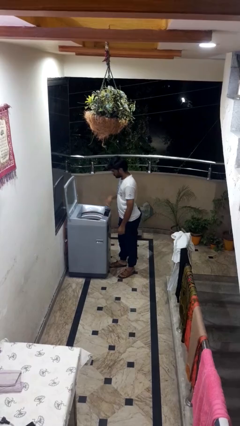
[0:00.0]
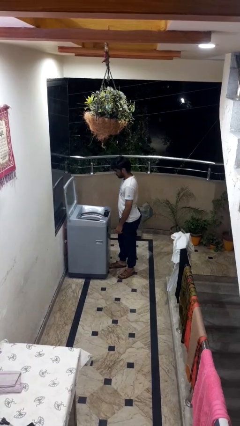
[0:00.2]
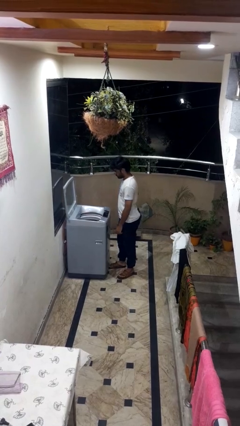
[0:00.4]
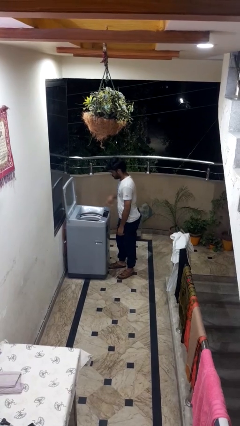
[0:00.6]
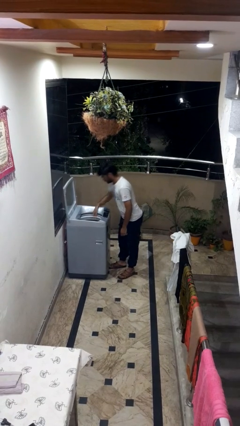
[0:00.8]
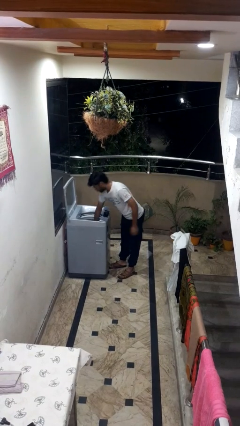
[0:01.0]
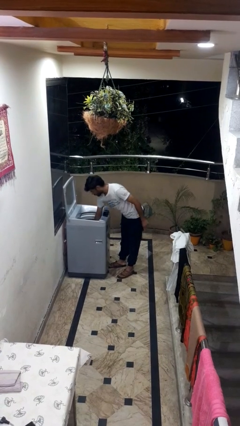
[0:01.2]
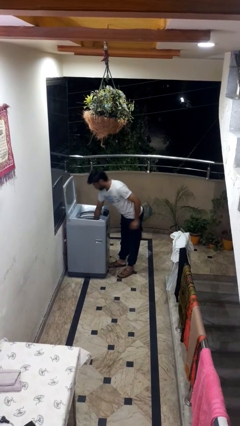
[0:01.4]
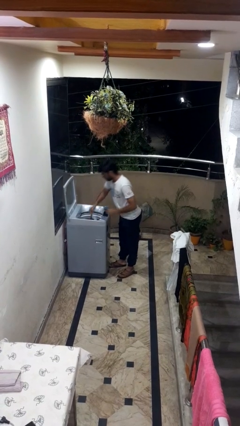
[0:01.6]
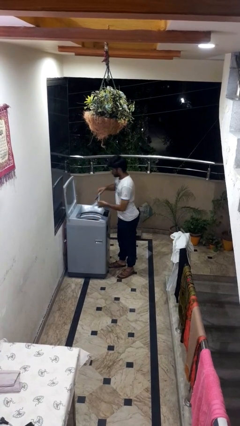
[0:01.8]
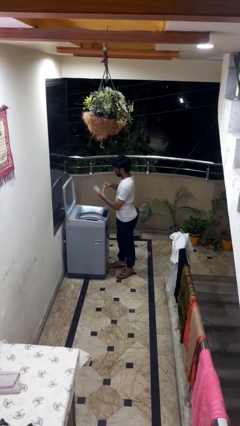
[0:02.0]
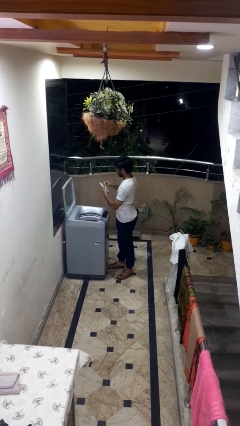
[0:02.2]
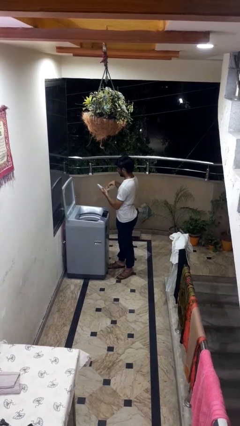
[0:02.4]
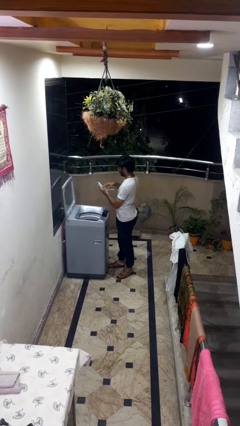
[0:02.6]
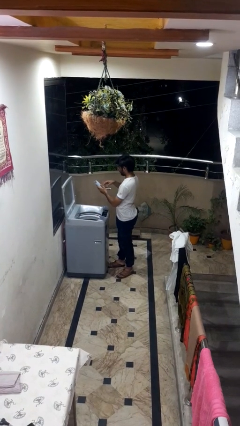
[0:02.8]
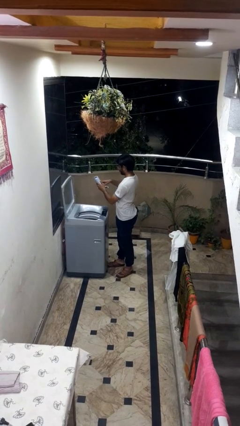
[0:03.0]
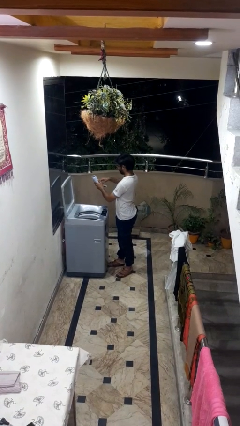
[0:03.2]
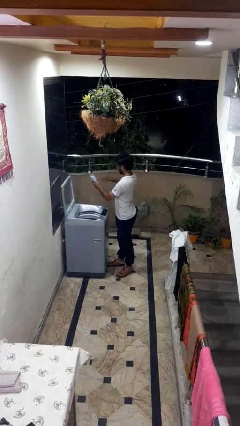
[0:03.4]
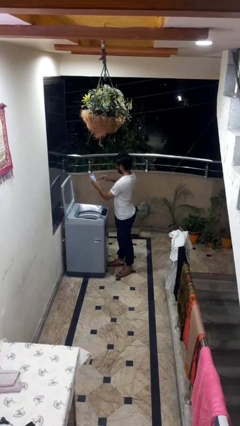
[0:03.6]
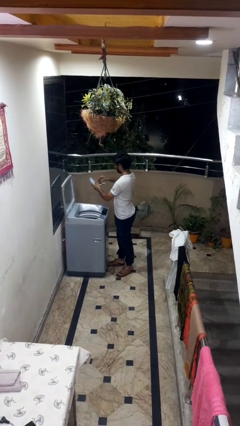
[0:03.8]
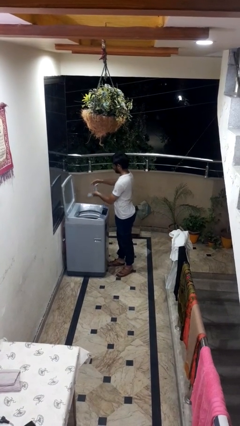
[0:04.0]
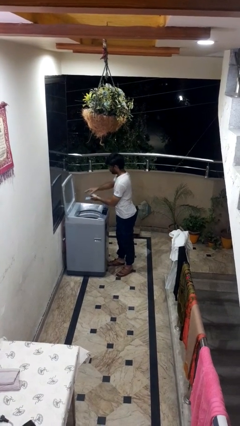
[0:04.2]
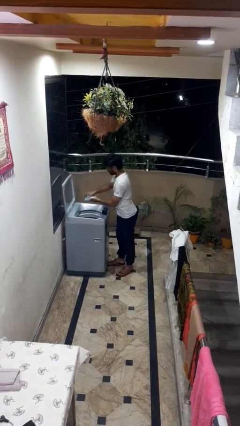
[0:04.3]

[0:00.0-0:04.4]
person cleans dryer lint trap

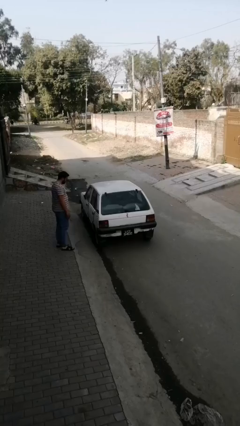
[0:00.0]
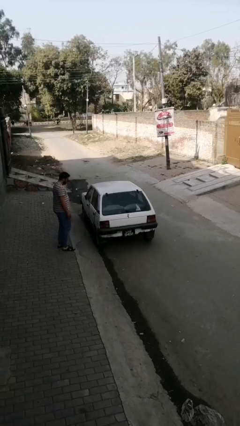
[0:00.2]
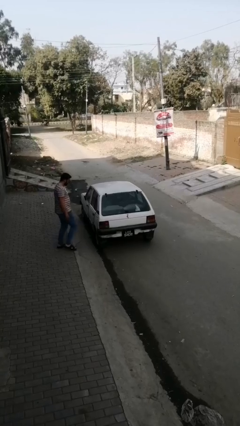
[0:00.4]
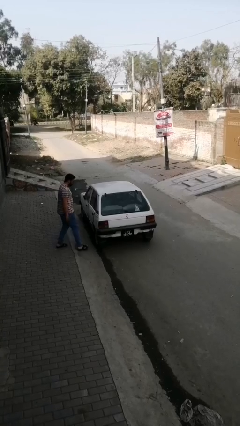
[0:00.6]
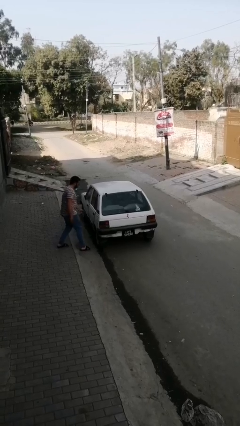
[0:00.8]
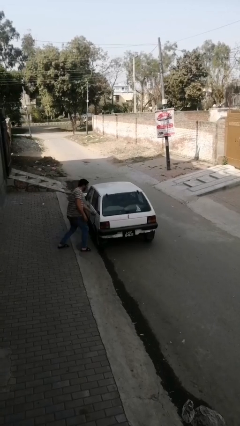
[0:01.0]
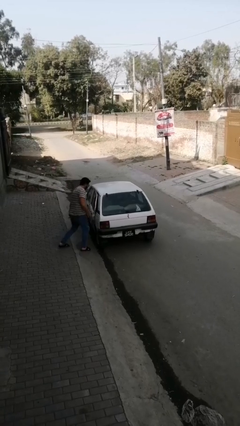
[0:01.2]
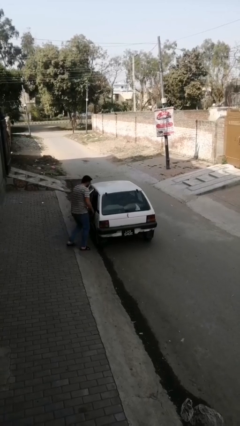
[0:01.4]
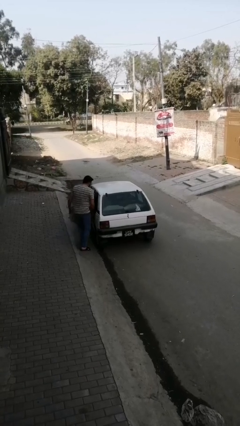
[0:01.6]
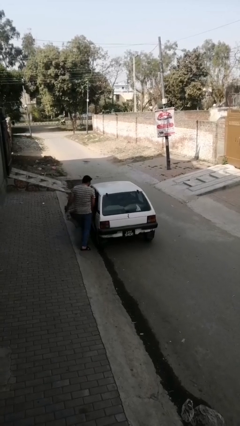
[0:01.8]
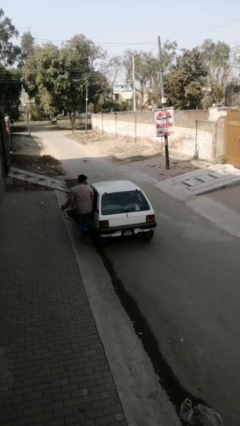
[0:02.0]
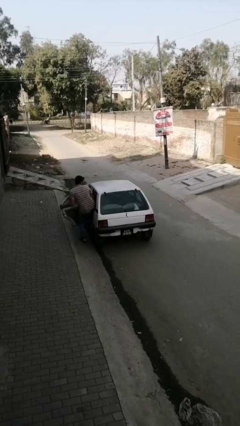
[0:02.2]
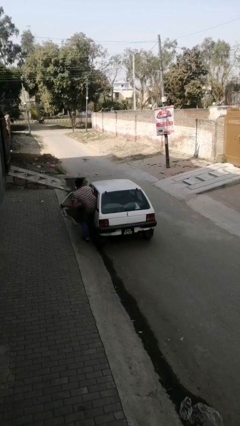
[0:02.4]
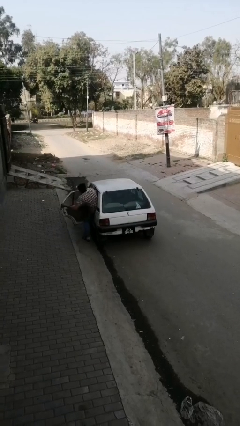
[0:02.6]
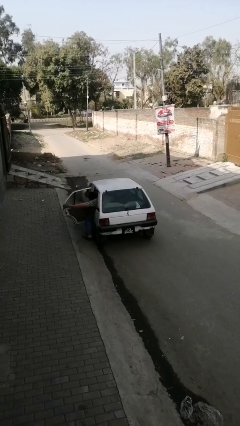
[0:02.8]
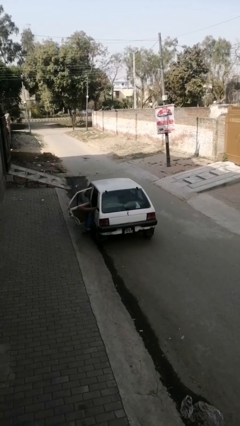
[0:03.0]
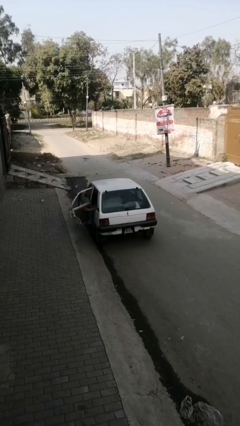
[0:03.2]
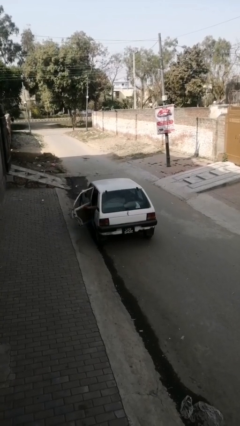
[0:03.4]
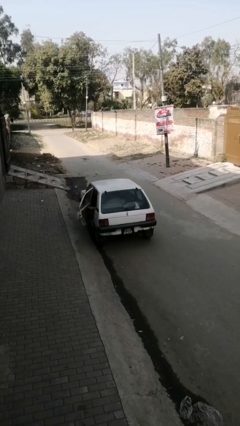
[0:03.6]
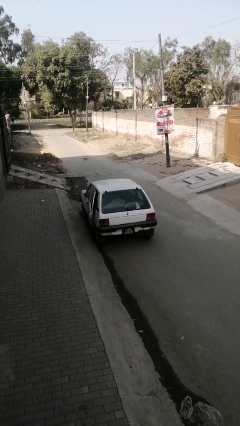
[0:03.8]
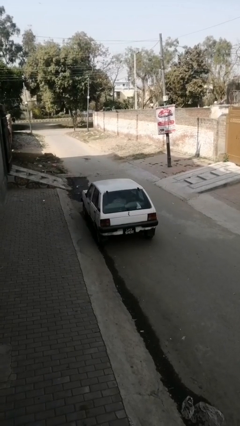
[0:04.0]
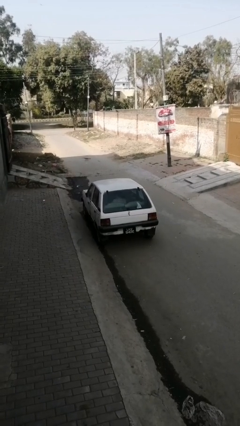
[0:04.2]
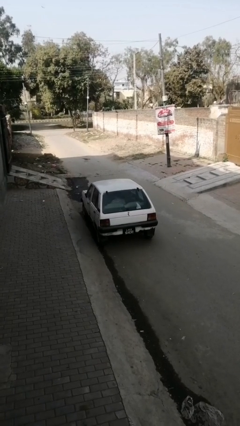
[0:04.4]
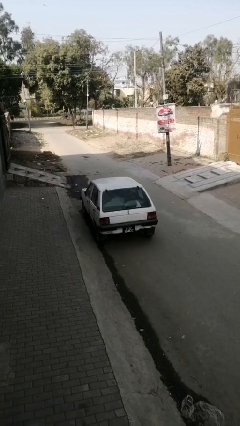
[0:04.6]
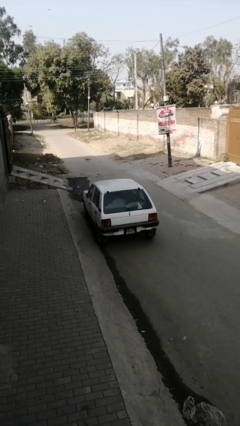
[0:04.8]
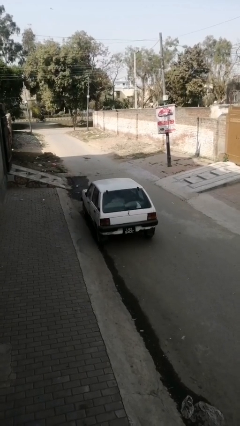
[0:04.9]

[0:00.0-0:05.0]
car picks up person

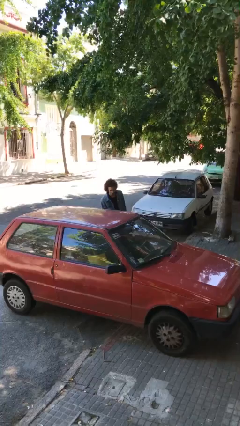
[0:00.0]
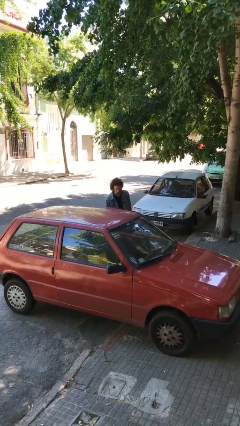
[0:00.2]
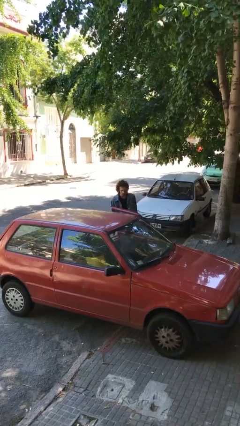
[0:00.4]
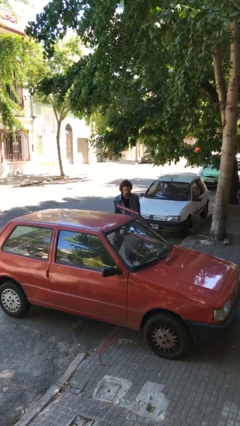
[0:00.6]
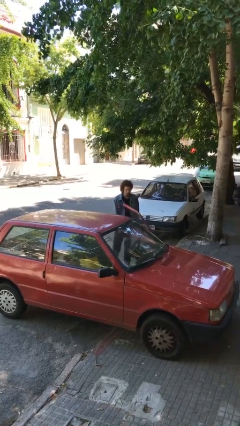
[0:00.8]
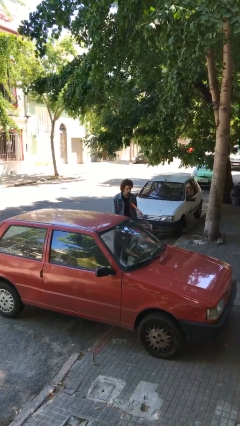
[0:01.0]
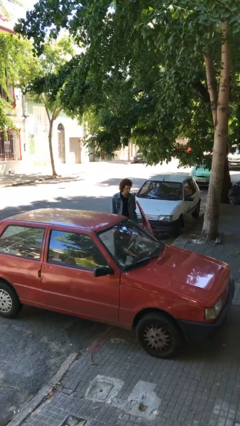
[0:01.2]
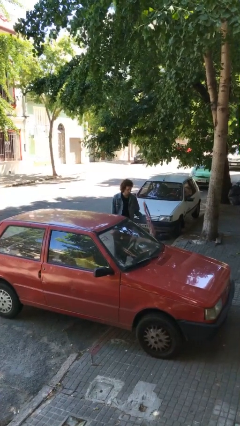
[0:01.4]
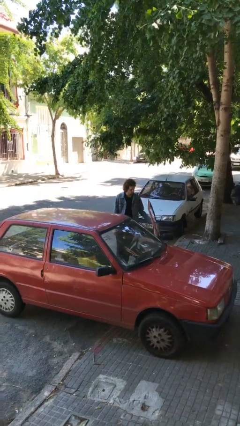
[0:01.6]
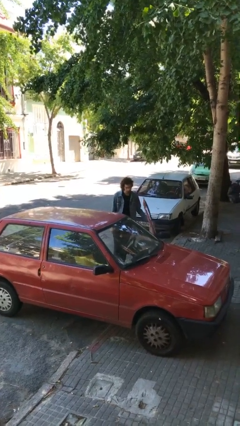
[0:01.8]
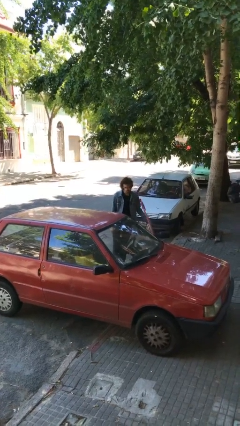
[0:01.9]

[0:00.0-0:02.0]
person opens car door

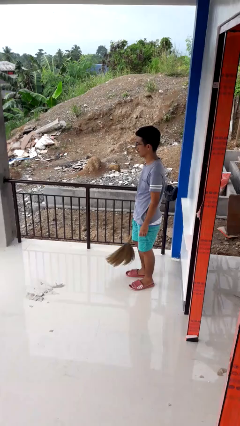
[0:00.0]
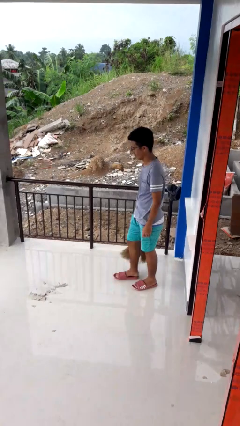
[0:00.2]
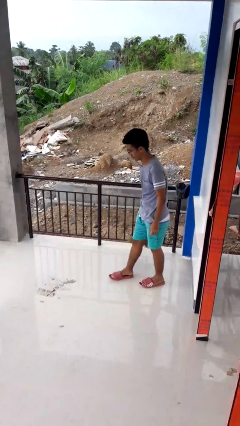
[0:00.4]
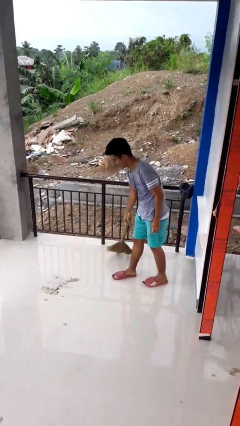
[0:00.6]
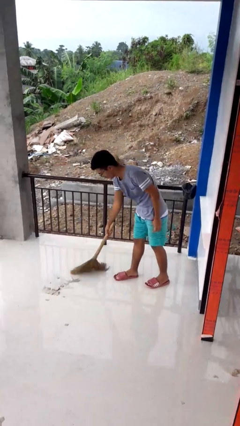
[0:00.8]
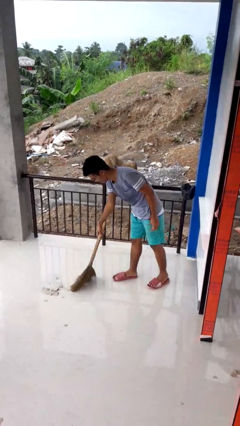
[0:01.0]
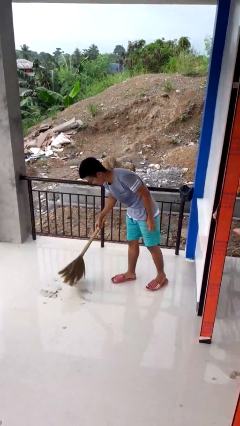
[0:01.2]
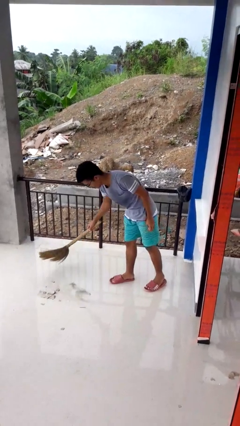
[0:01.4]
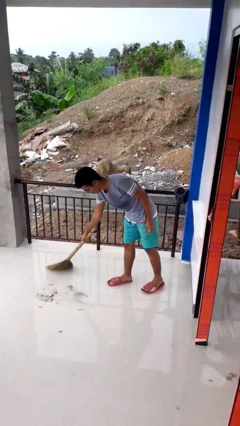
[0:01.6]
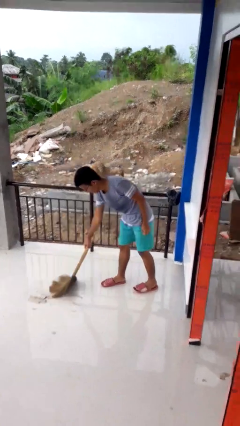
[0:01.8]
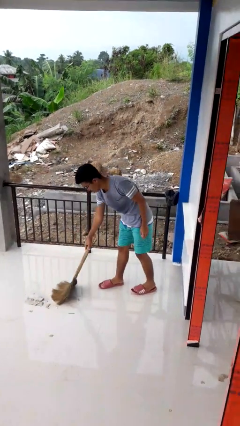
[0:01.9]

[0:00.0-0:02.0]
person sweeps floor

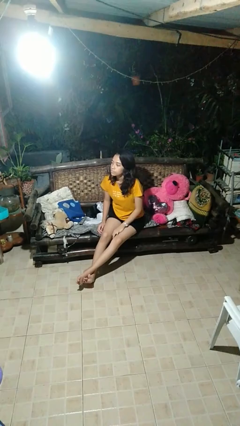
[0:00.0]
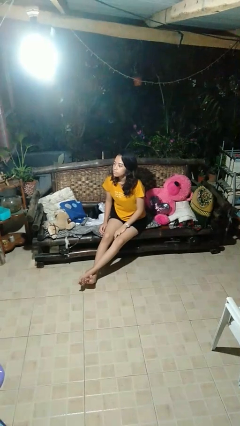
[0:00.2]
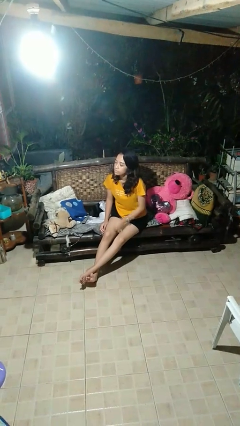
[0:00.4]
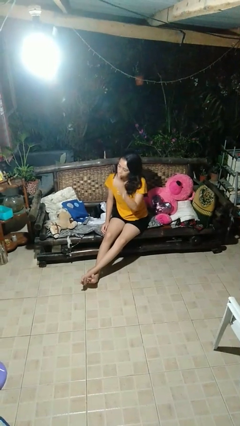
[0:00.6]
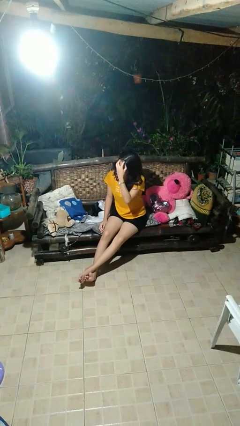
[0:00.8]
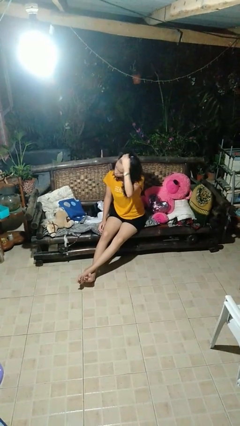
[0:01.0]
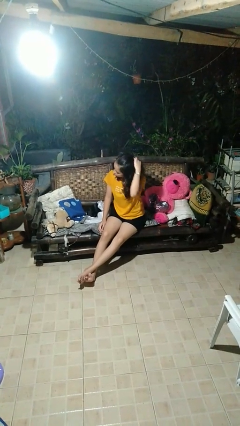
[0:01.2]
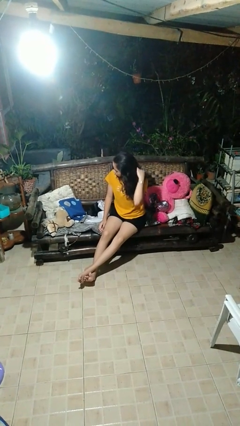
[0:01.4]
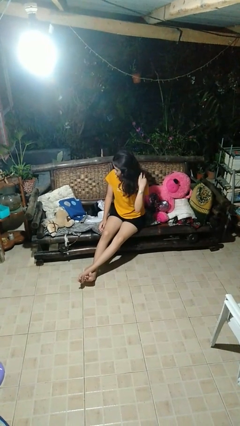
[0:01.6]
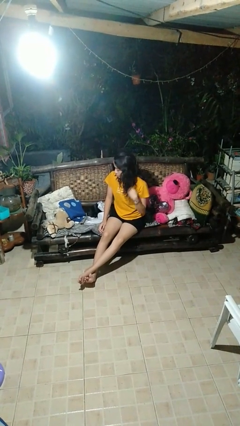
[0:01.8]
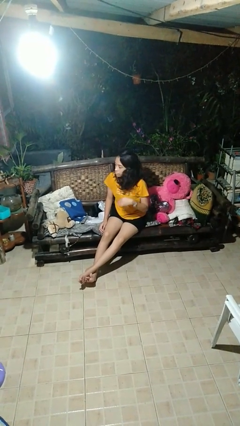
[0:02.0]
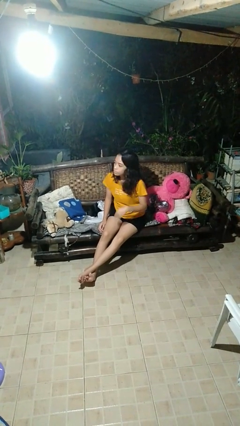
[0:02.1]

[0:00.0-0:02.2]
person strokes hair

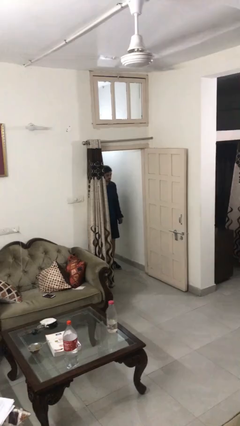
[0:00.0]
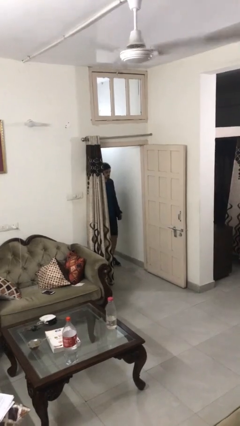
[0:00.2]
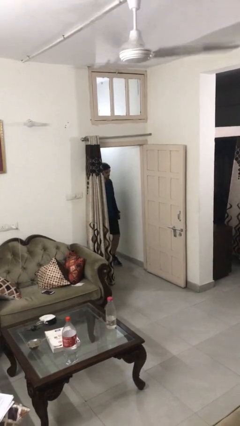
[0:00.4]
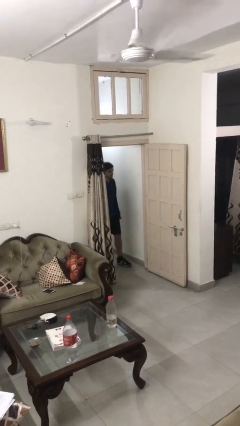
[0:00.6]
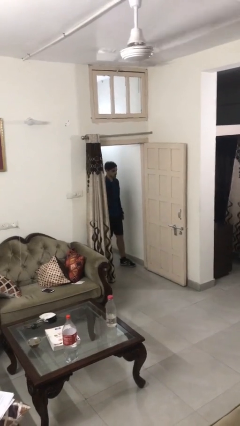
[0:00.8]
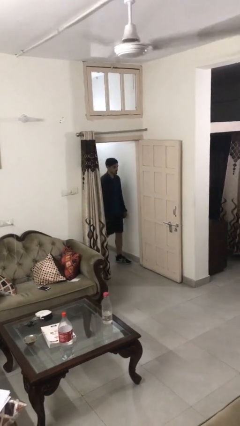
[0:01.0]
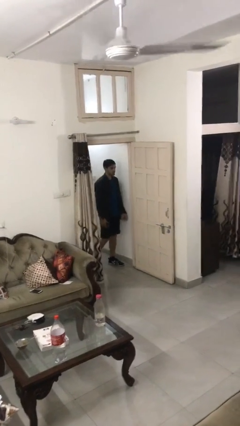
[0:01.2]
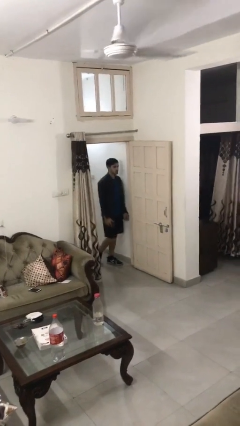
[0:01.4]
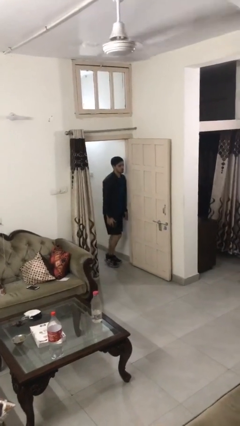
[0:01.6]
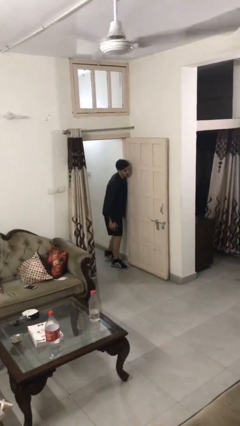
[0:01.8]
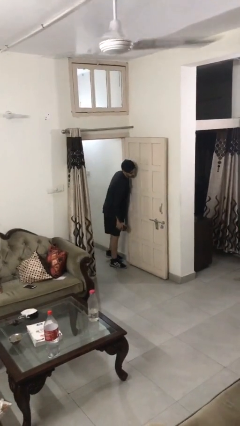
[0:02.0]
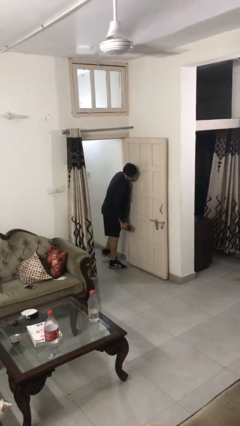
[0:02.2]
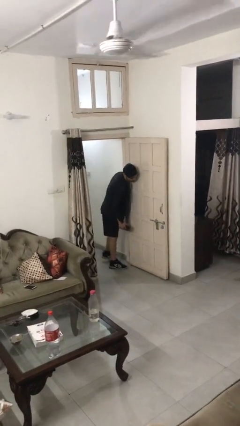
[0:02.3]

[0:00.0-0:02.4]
person bumps into wall
